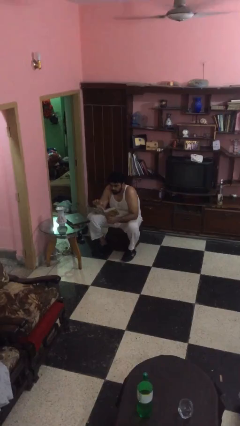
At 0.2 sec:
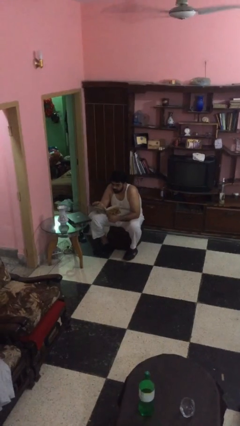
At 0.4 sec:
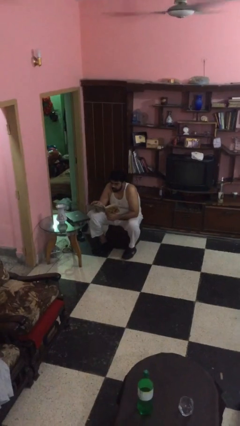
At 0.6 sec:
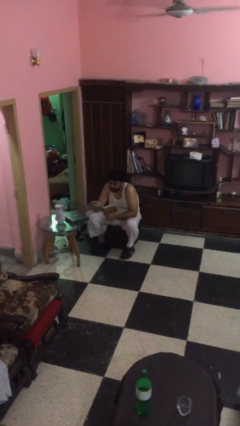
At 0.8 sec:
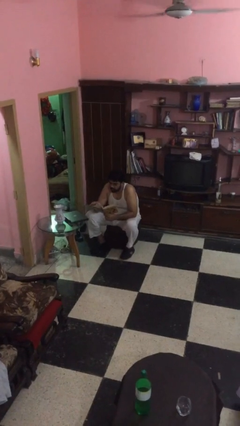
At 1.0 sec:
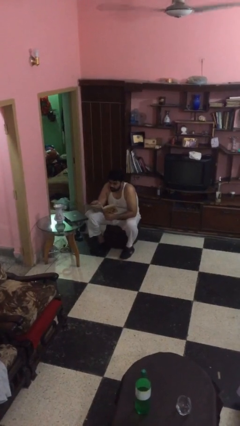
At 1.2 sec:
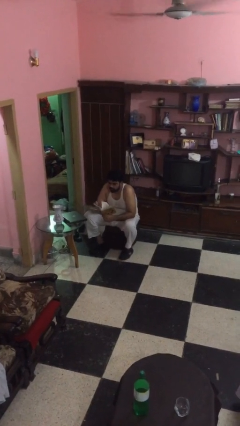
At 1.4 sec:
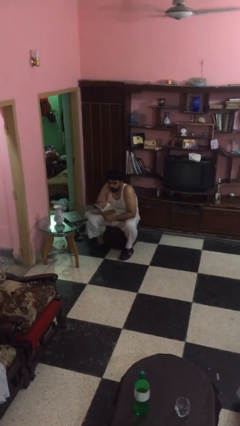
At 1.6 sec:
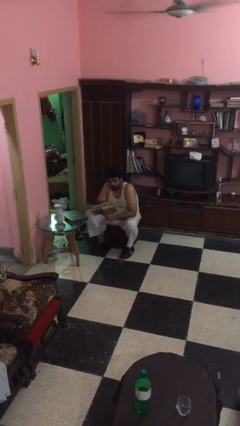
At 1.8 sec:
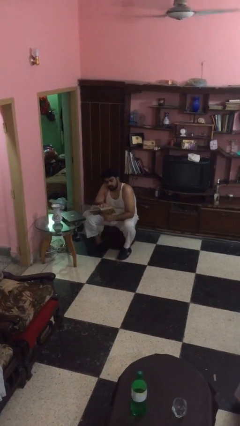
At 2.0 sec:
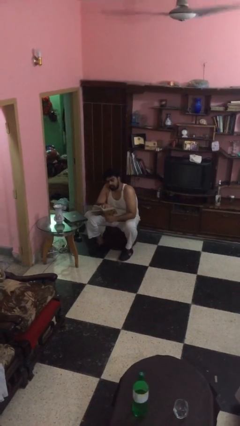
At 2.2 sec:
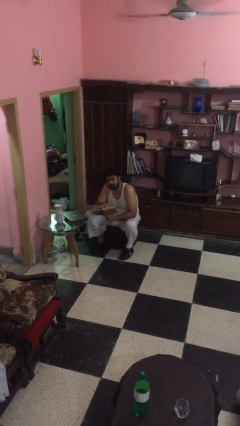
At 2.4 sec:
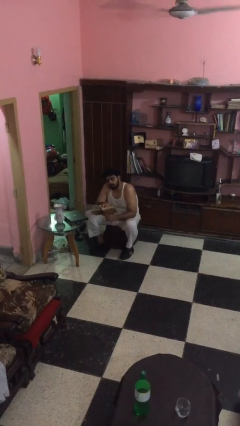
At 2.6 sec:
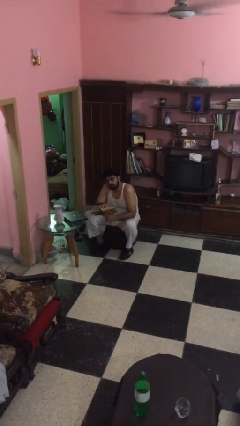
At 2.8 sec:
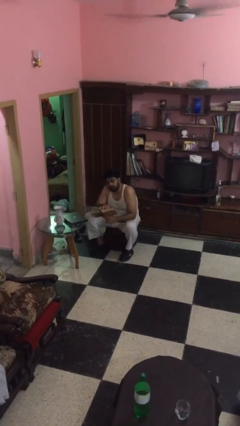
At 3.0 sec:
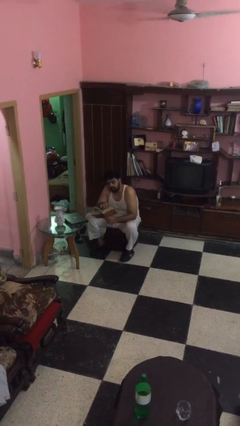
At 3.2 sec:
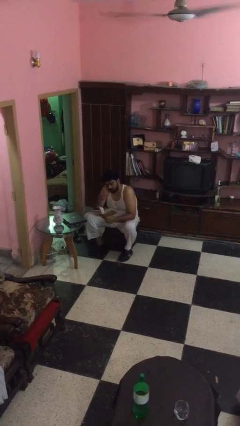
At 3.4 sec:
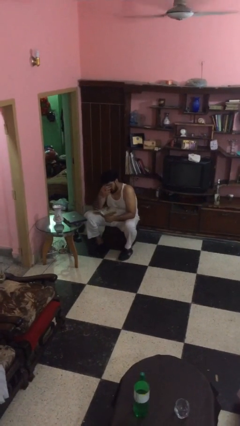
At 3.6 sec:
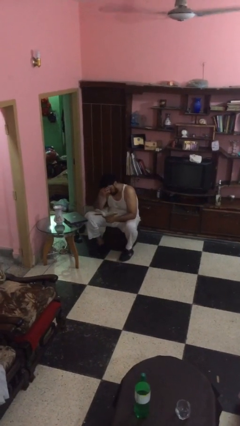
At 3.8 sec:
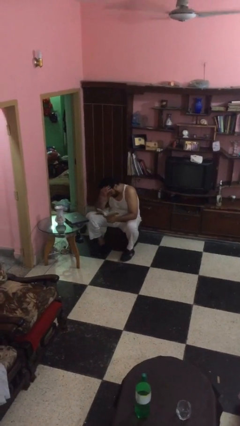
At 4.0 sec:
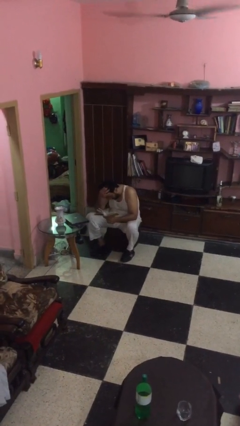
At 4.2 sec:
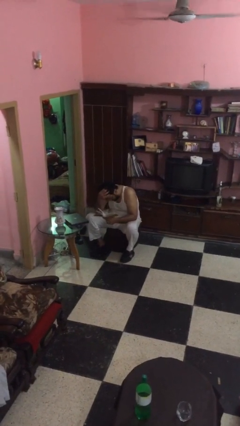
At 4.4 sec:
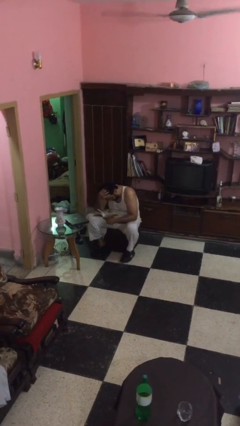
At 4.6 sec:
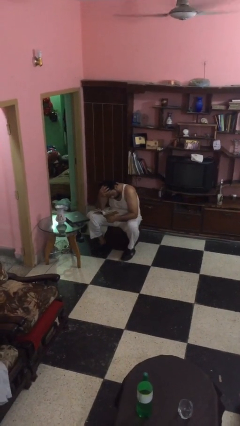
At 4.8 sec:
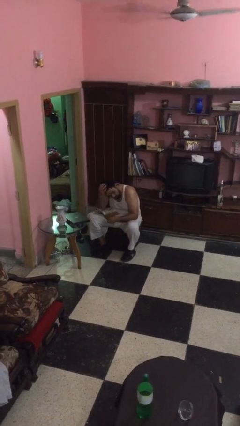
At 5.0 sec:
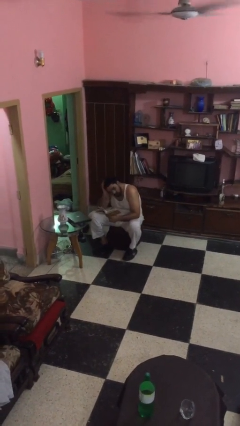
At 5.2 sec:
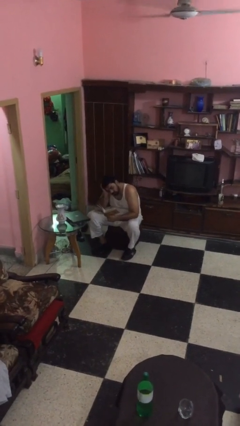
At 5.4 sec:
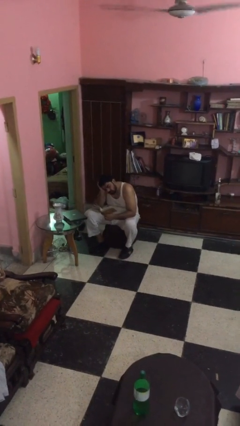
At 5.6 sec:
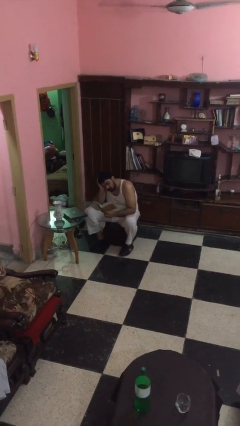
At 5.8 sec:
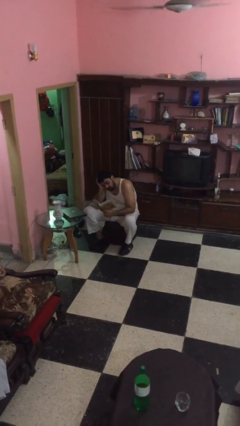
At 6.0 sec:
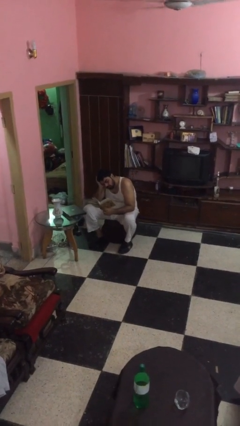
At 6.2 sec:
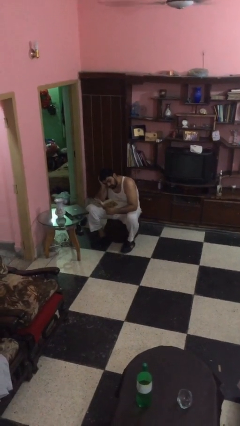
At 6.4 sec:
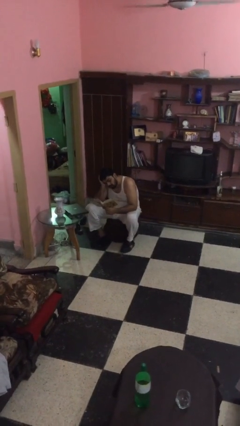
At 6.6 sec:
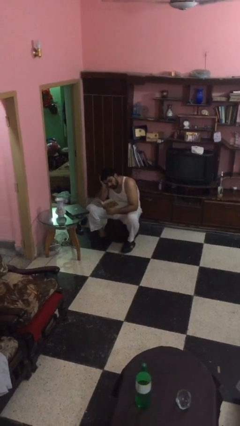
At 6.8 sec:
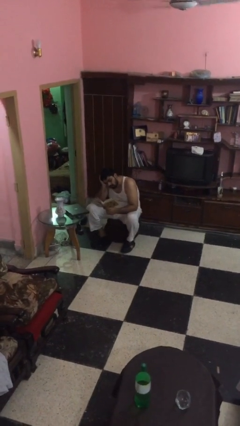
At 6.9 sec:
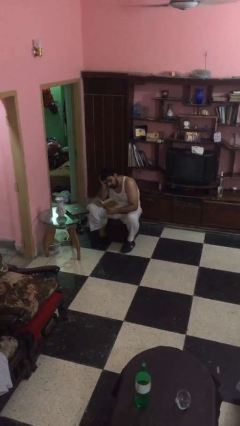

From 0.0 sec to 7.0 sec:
person reads document

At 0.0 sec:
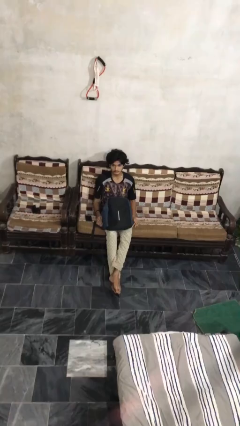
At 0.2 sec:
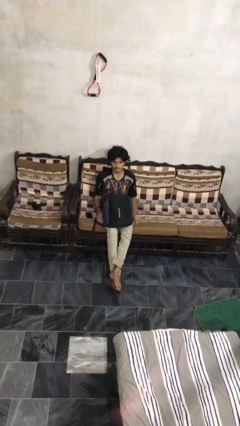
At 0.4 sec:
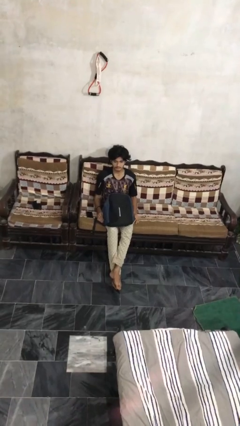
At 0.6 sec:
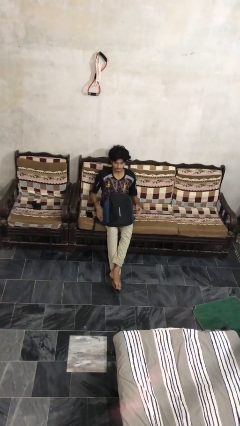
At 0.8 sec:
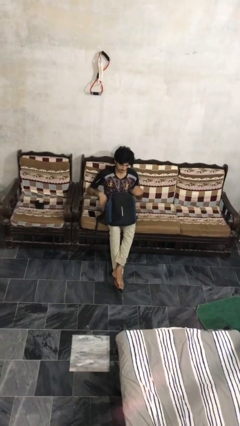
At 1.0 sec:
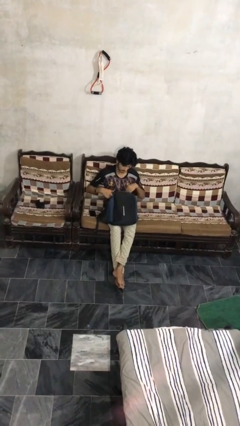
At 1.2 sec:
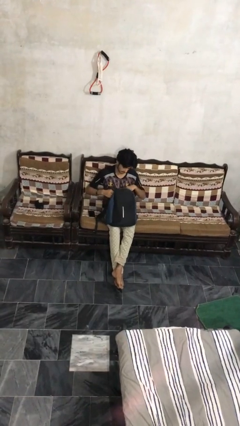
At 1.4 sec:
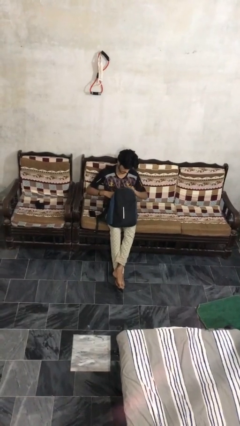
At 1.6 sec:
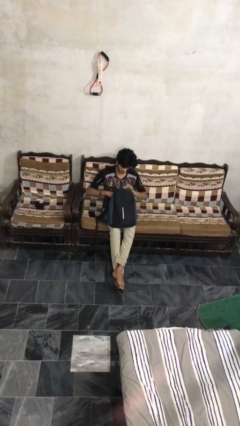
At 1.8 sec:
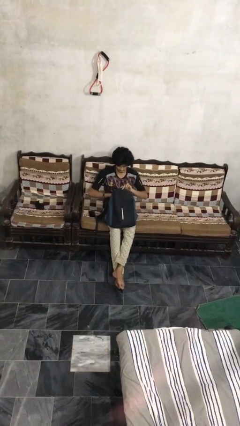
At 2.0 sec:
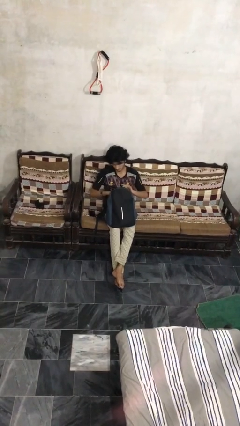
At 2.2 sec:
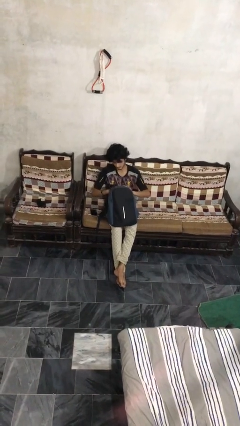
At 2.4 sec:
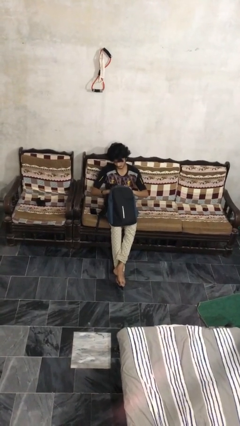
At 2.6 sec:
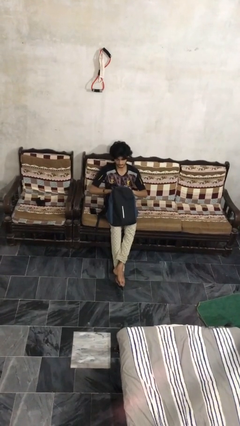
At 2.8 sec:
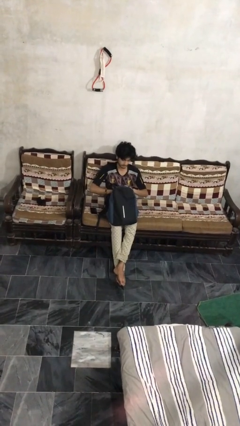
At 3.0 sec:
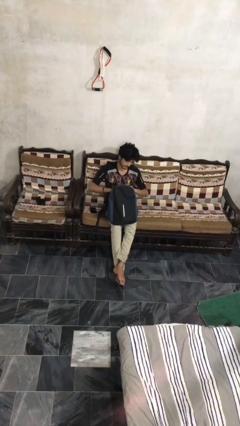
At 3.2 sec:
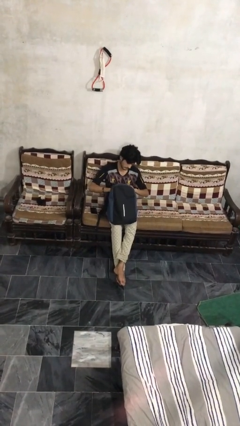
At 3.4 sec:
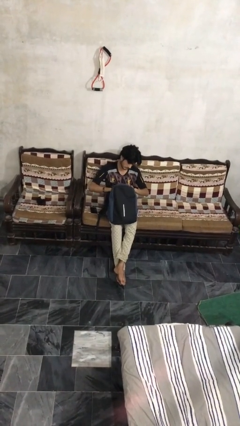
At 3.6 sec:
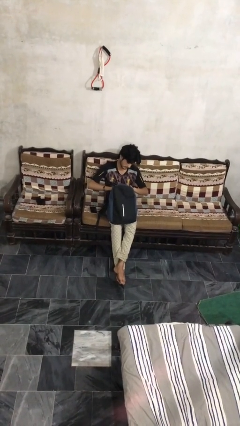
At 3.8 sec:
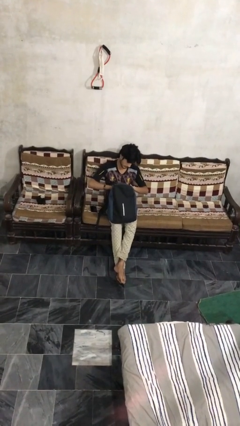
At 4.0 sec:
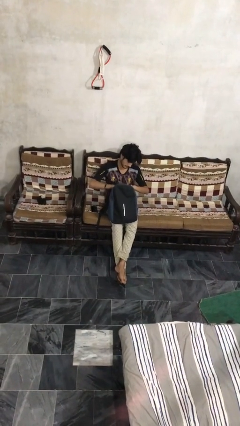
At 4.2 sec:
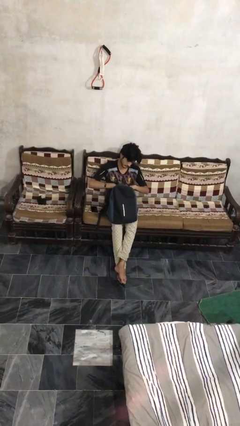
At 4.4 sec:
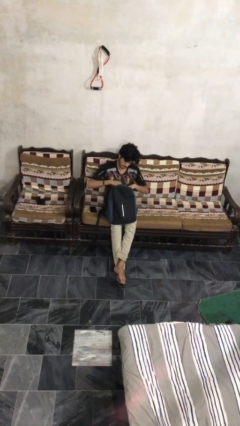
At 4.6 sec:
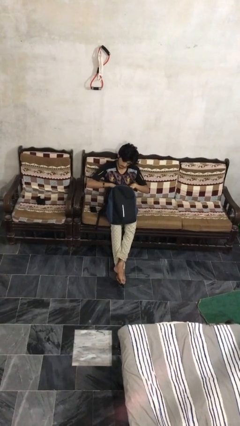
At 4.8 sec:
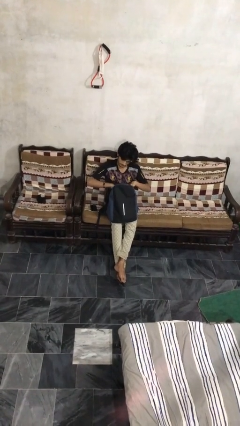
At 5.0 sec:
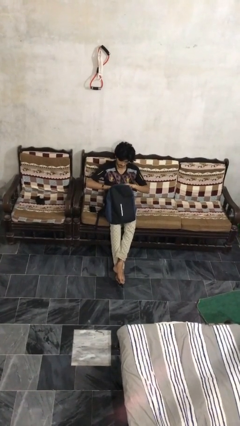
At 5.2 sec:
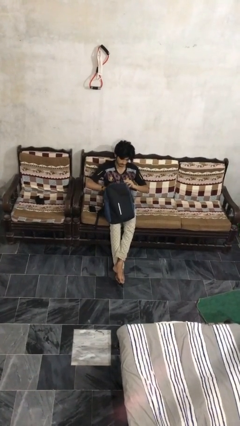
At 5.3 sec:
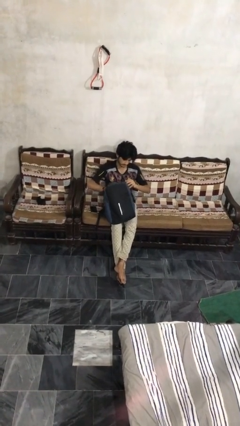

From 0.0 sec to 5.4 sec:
person searches in backpack

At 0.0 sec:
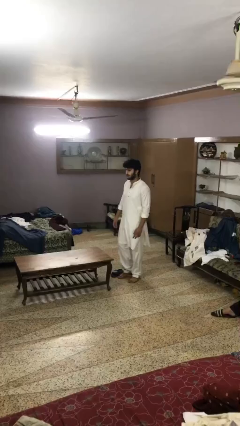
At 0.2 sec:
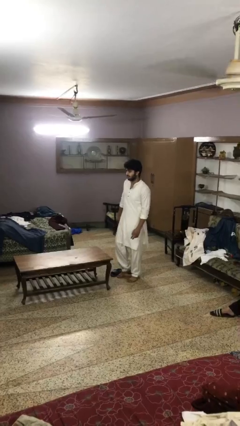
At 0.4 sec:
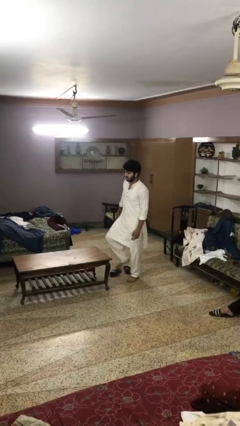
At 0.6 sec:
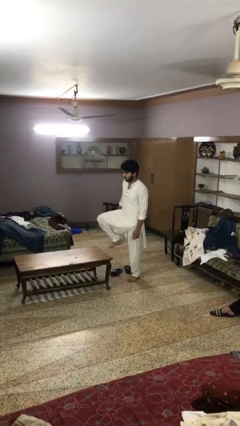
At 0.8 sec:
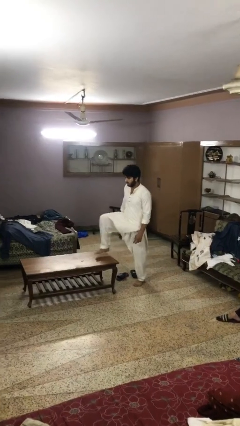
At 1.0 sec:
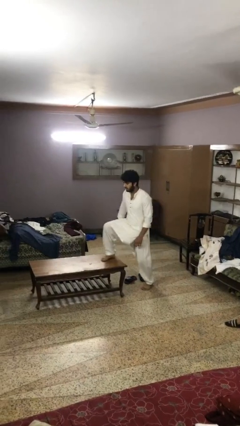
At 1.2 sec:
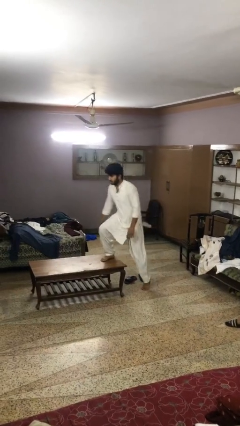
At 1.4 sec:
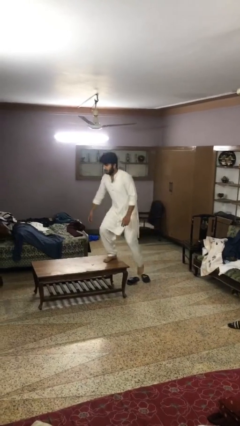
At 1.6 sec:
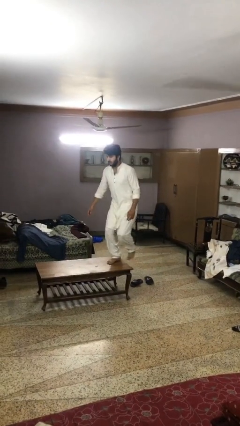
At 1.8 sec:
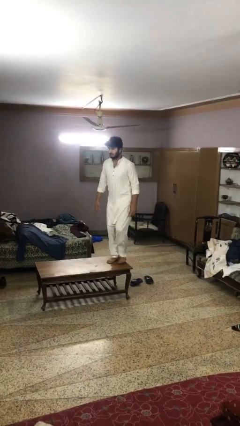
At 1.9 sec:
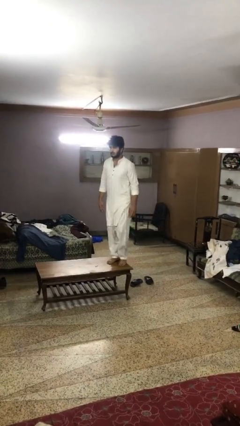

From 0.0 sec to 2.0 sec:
person climbs on table

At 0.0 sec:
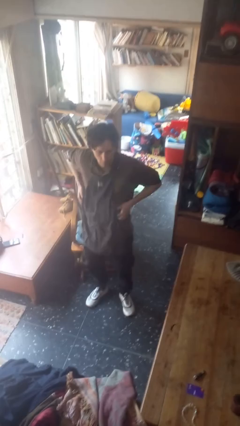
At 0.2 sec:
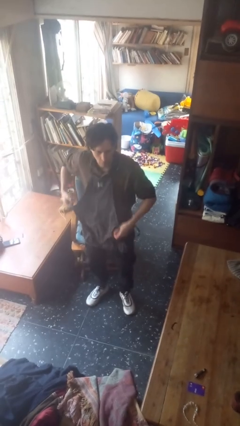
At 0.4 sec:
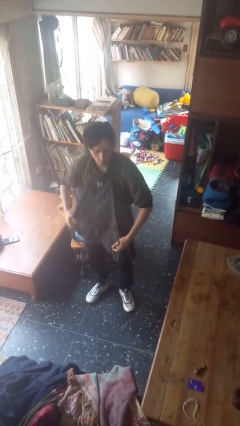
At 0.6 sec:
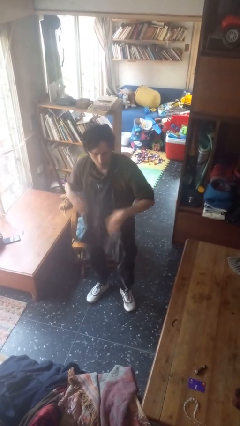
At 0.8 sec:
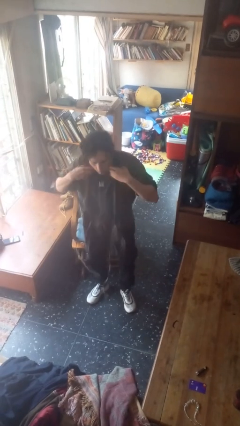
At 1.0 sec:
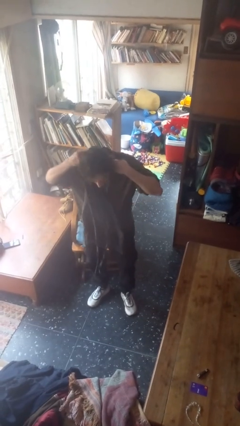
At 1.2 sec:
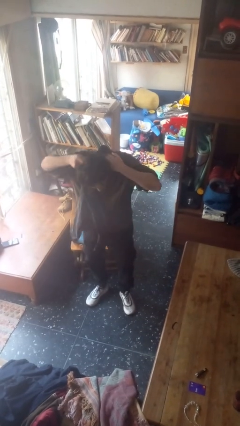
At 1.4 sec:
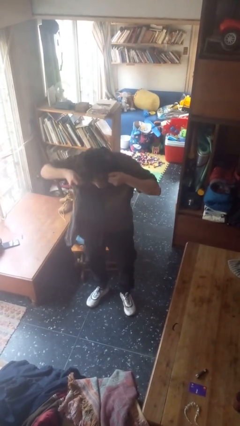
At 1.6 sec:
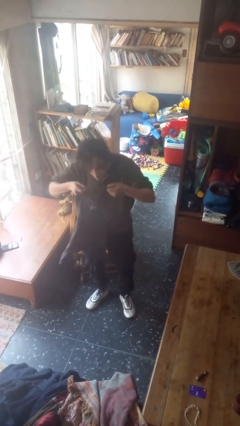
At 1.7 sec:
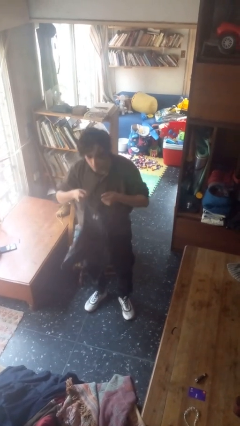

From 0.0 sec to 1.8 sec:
person takes off apron

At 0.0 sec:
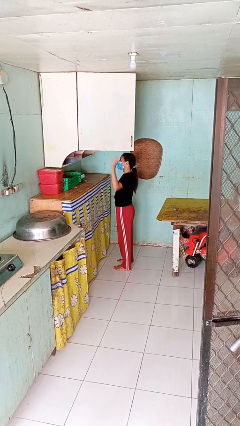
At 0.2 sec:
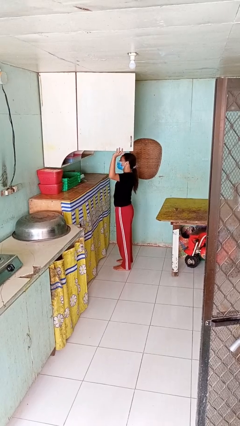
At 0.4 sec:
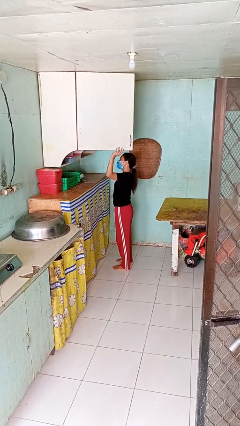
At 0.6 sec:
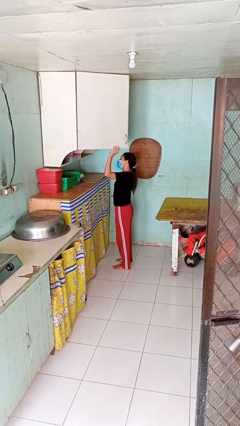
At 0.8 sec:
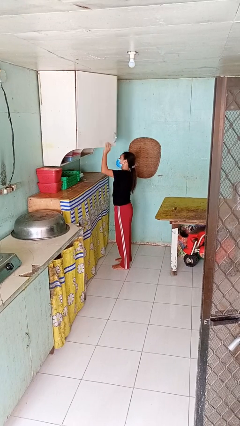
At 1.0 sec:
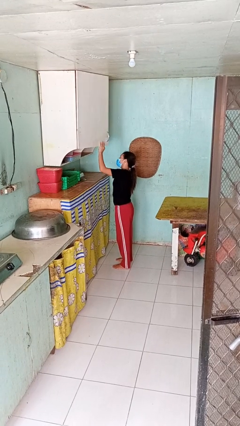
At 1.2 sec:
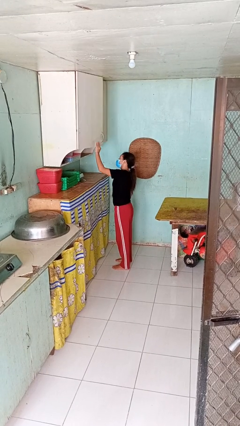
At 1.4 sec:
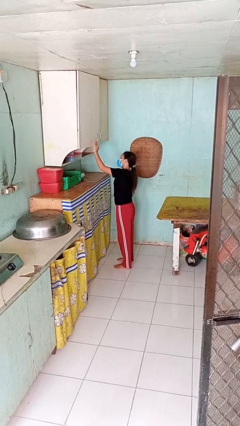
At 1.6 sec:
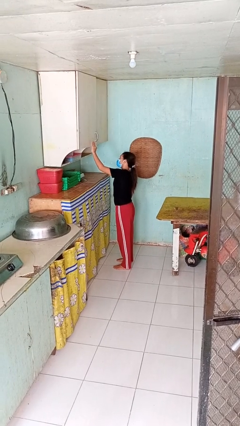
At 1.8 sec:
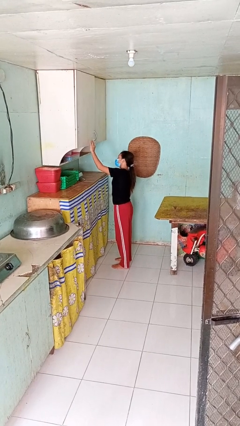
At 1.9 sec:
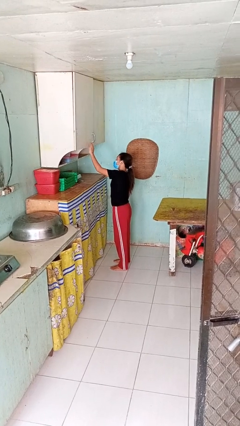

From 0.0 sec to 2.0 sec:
person closes cabinet
